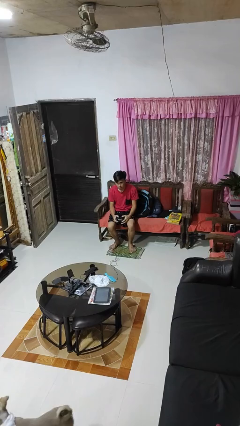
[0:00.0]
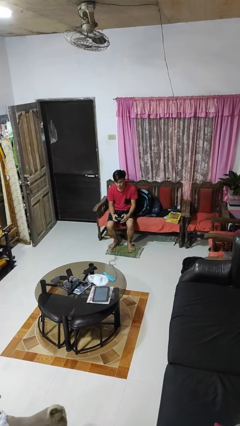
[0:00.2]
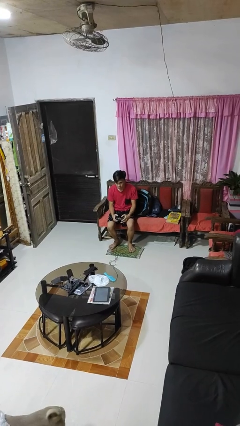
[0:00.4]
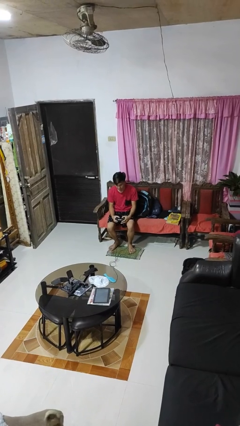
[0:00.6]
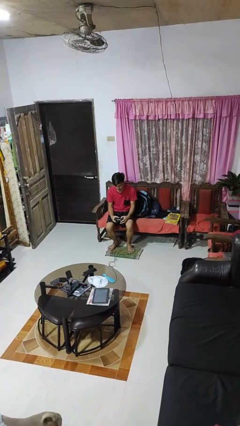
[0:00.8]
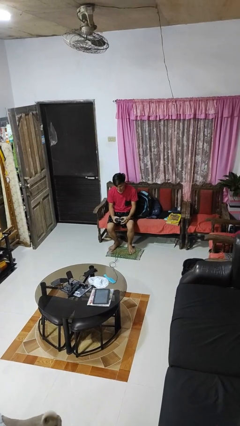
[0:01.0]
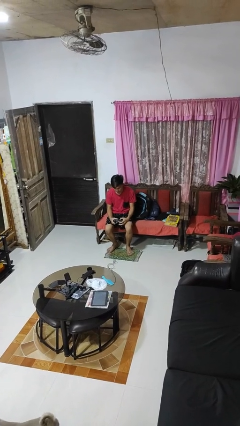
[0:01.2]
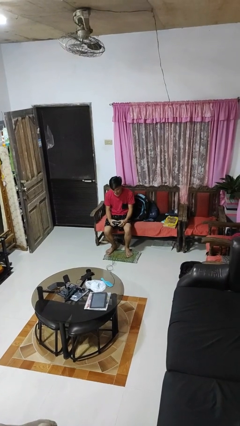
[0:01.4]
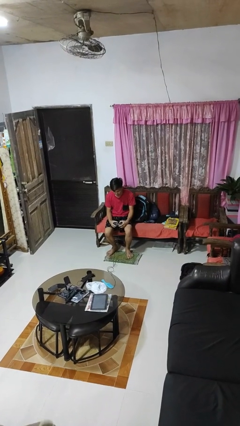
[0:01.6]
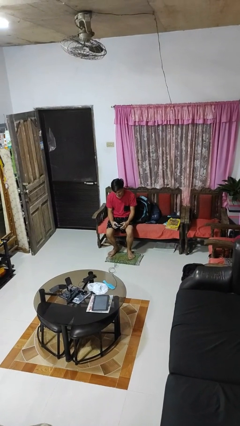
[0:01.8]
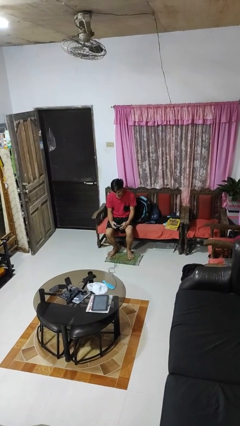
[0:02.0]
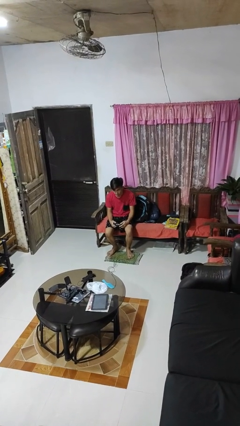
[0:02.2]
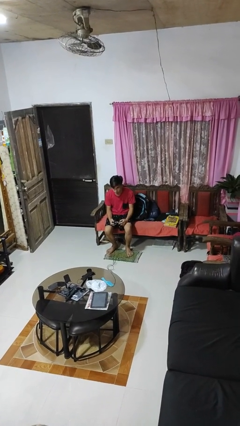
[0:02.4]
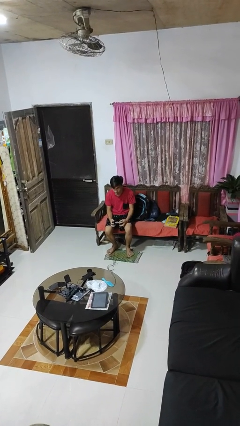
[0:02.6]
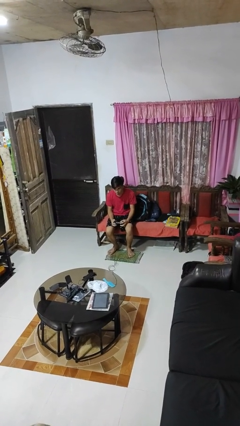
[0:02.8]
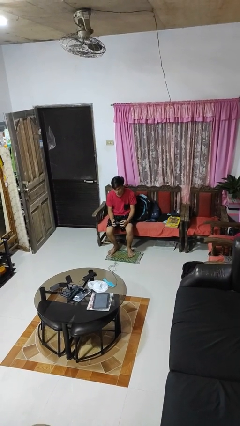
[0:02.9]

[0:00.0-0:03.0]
person interacts with handheld game

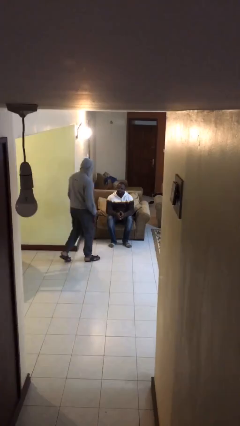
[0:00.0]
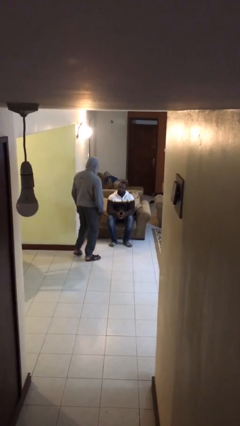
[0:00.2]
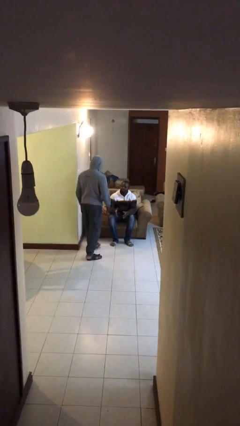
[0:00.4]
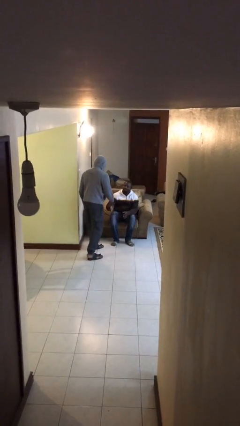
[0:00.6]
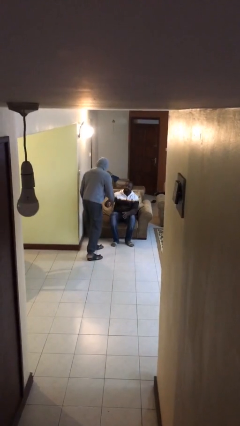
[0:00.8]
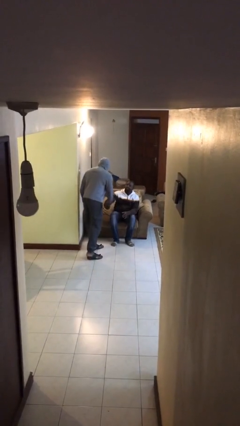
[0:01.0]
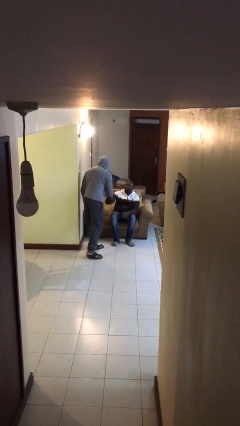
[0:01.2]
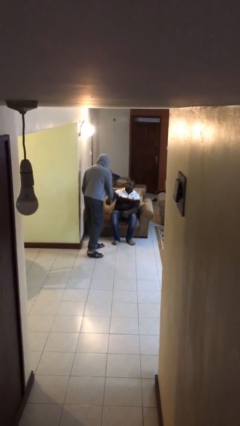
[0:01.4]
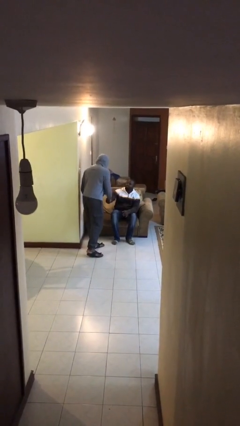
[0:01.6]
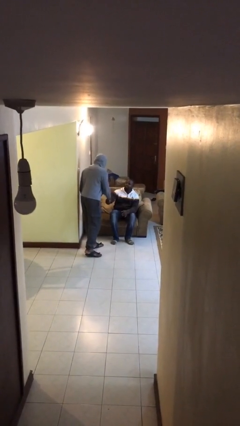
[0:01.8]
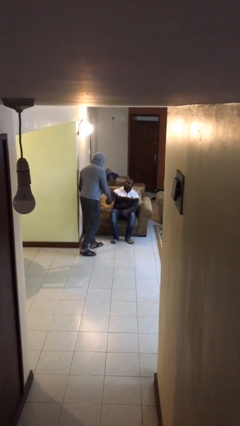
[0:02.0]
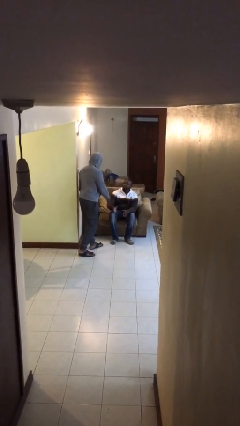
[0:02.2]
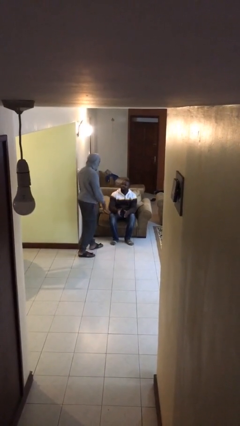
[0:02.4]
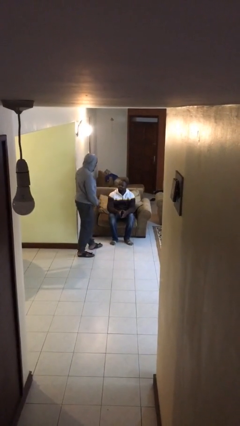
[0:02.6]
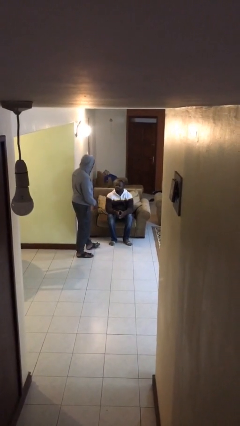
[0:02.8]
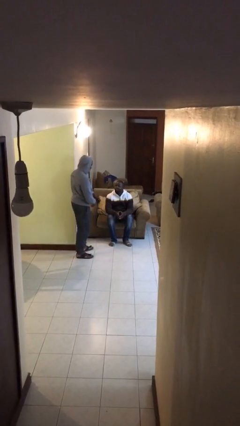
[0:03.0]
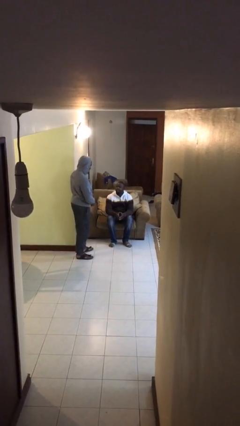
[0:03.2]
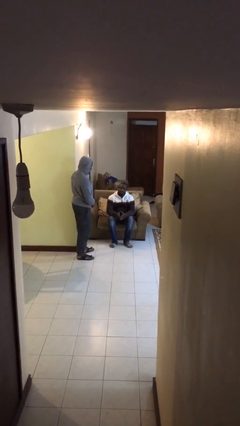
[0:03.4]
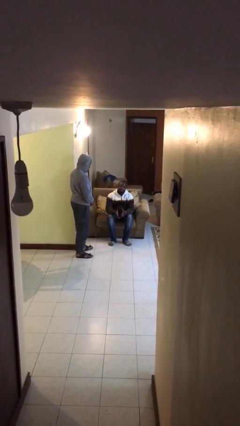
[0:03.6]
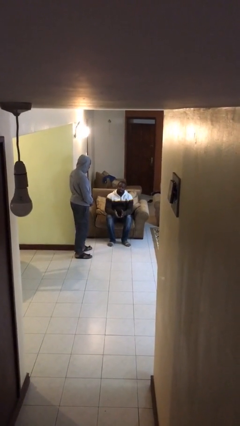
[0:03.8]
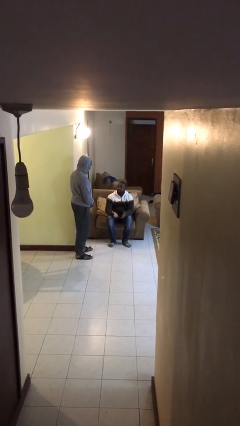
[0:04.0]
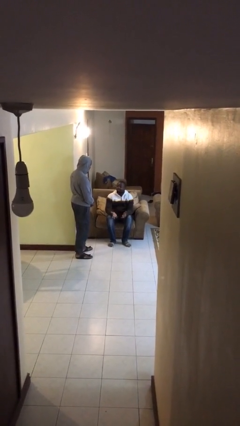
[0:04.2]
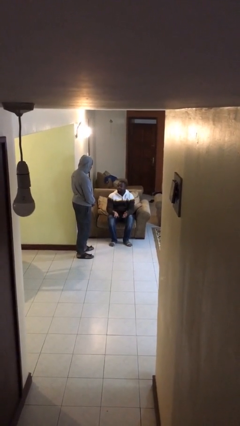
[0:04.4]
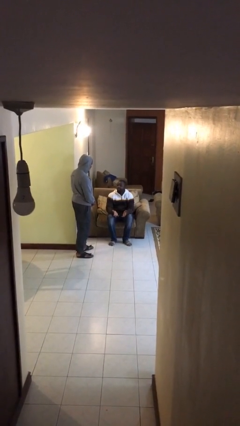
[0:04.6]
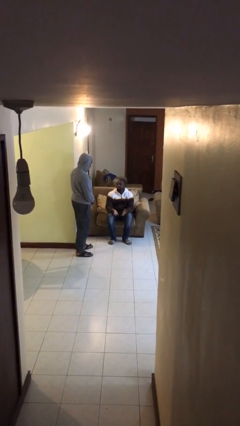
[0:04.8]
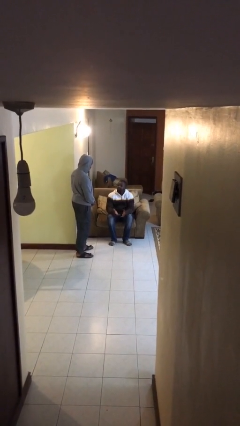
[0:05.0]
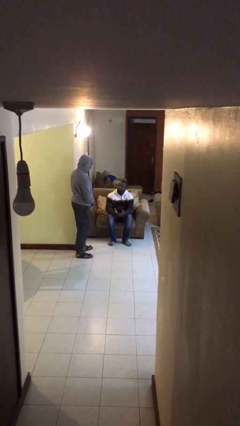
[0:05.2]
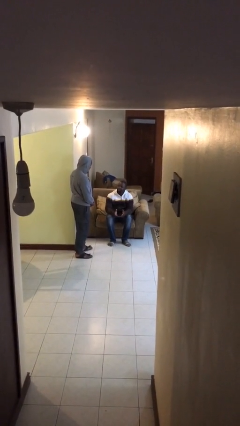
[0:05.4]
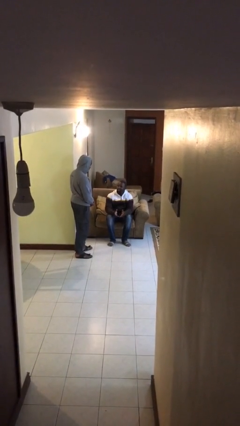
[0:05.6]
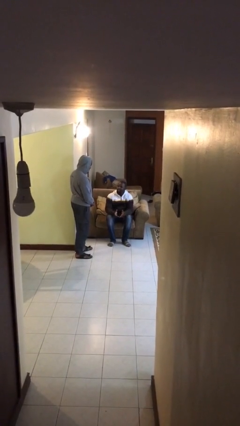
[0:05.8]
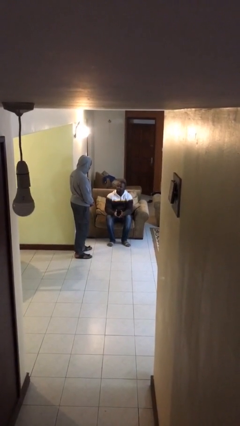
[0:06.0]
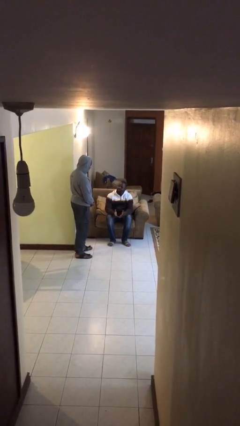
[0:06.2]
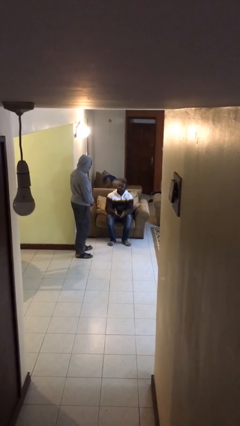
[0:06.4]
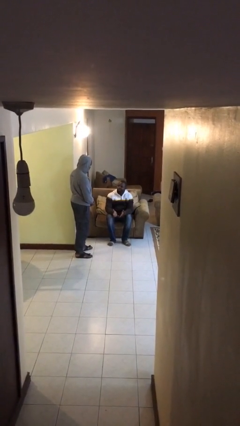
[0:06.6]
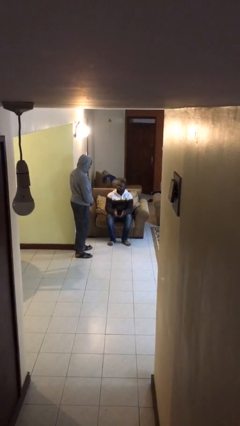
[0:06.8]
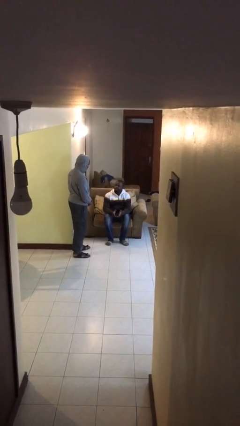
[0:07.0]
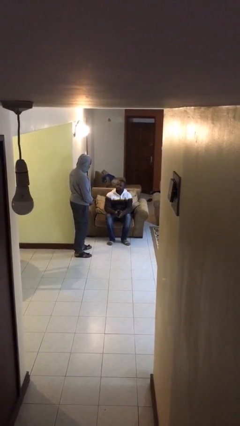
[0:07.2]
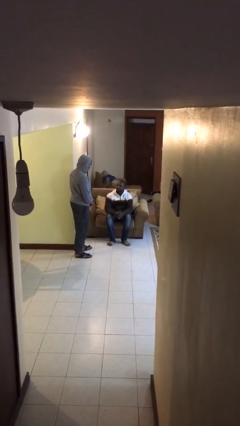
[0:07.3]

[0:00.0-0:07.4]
person shakes hand

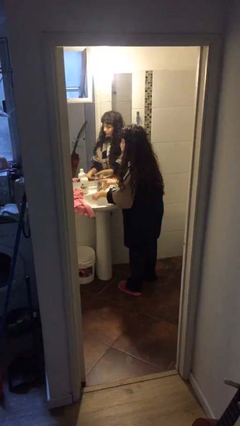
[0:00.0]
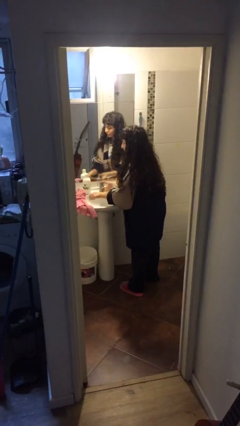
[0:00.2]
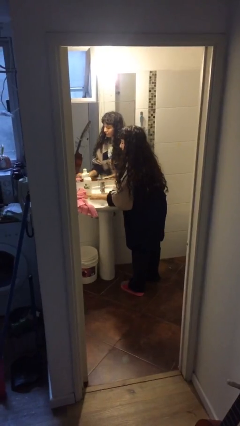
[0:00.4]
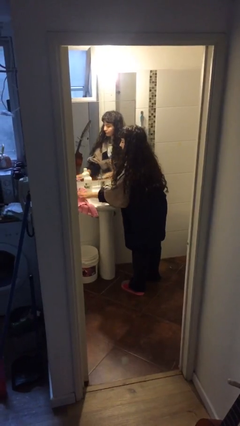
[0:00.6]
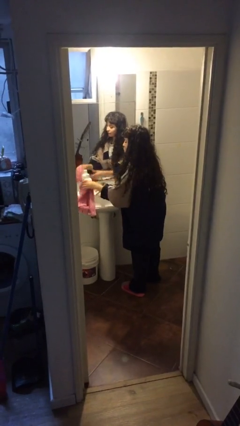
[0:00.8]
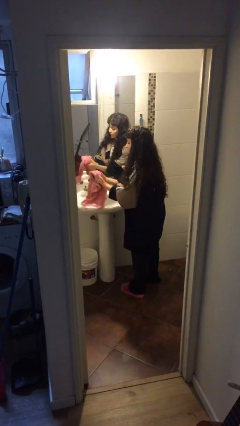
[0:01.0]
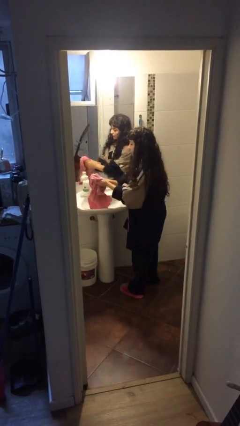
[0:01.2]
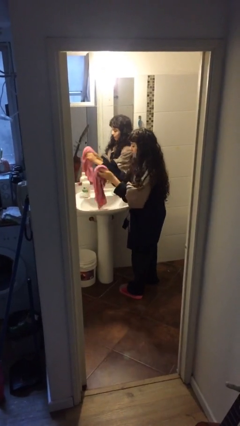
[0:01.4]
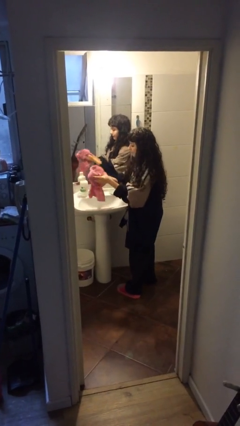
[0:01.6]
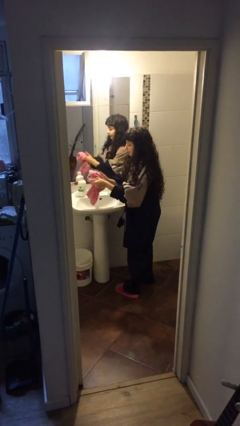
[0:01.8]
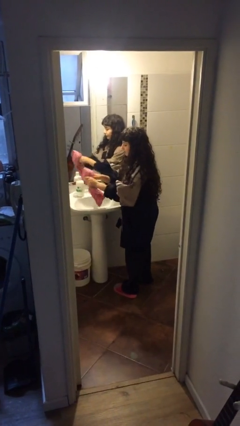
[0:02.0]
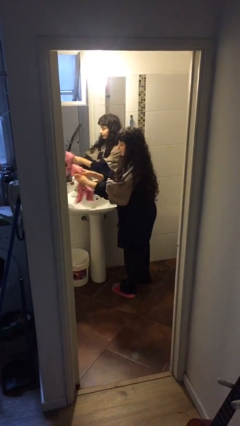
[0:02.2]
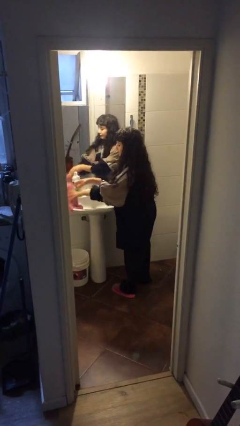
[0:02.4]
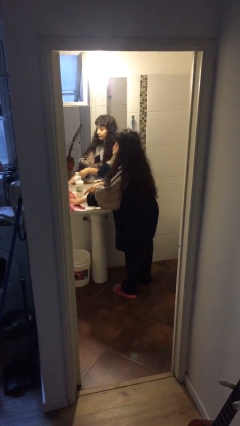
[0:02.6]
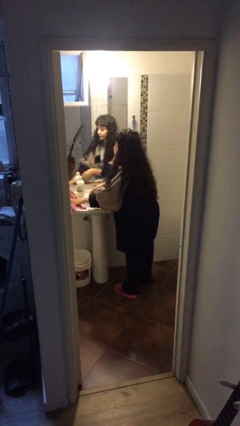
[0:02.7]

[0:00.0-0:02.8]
person dries hands with towel

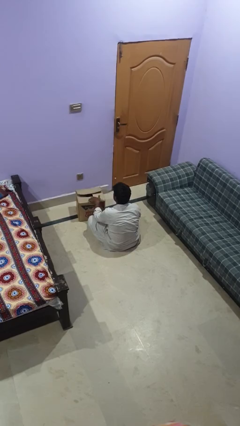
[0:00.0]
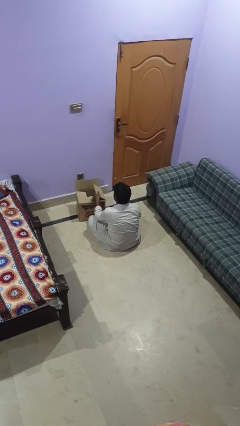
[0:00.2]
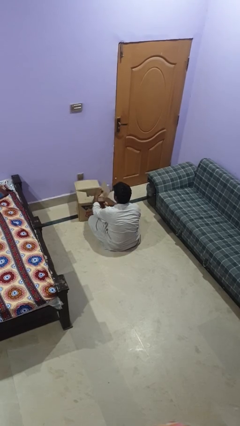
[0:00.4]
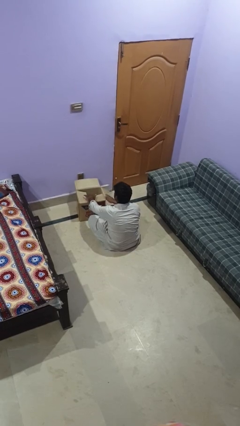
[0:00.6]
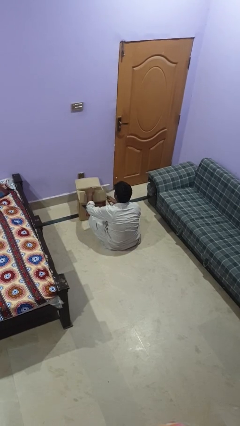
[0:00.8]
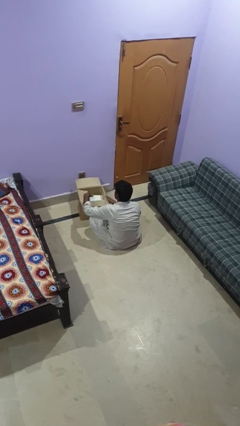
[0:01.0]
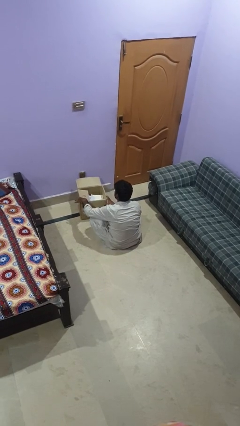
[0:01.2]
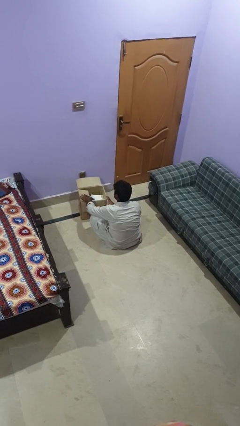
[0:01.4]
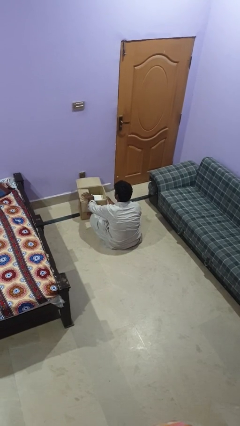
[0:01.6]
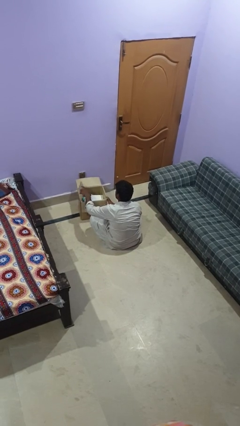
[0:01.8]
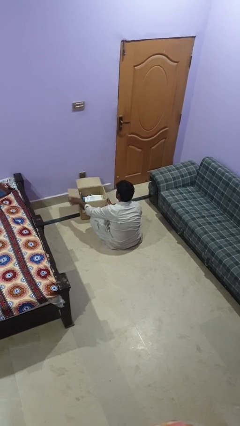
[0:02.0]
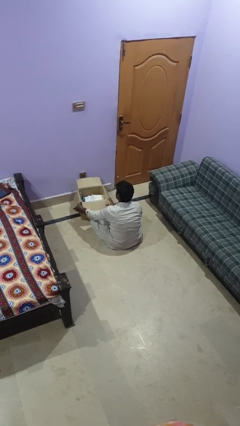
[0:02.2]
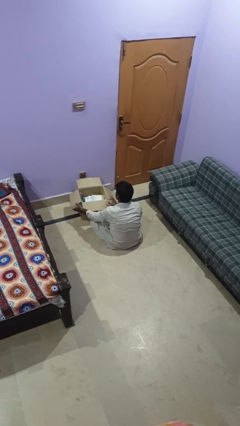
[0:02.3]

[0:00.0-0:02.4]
person opens box

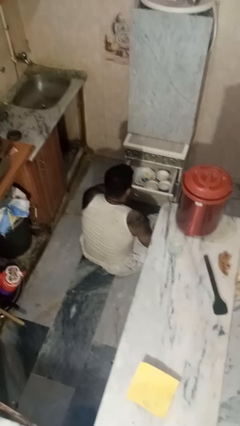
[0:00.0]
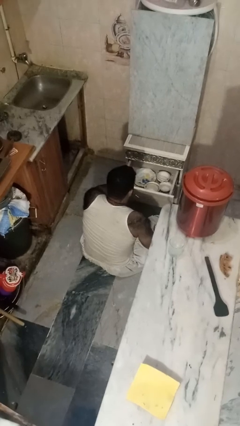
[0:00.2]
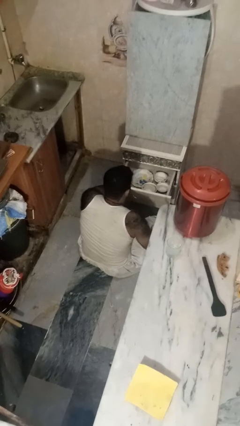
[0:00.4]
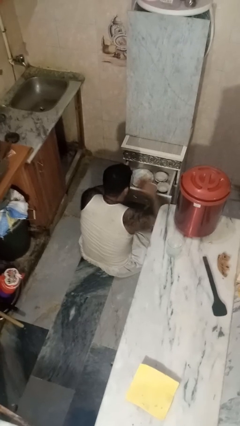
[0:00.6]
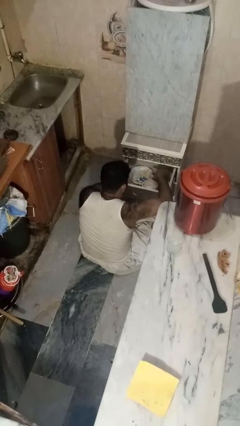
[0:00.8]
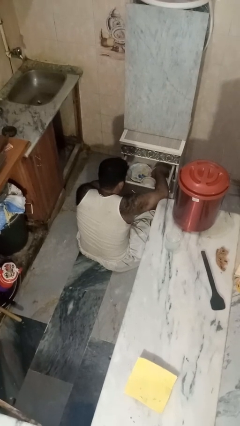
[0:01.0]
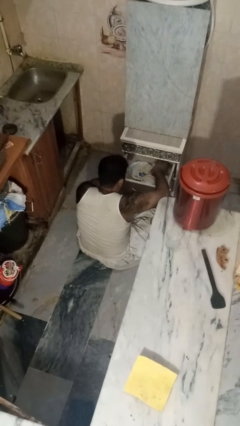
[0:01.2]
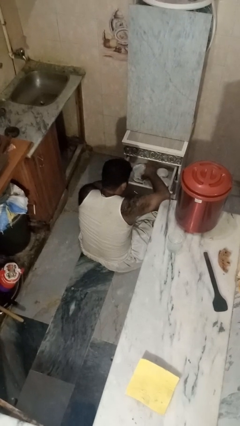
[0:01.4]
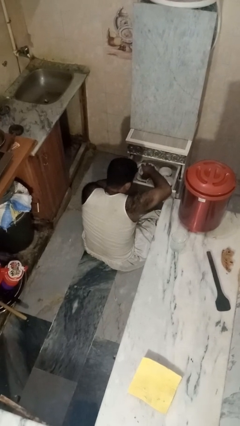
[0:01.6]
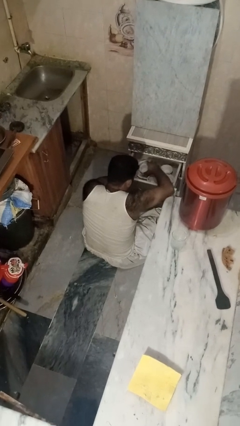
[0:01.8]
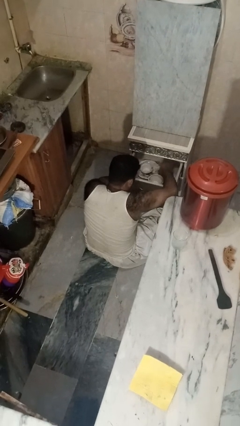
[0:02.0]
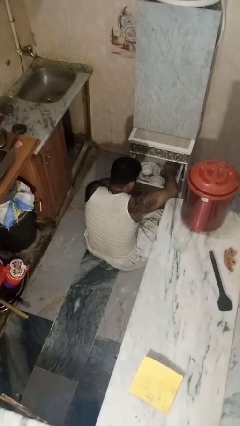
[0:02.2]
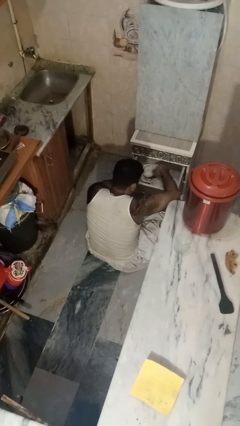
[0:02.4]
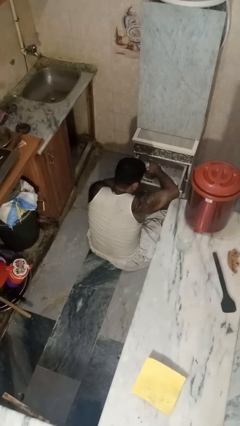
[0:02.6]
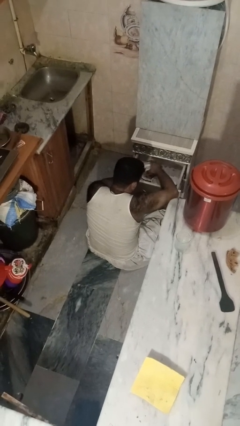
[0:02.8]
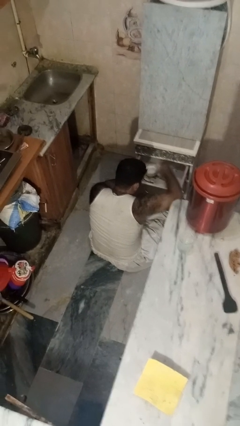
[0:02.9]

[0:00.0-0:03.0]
person searches in kitchen drawer
